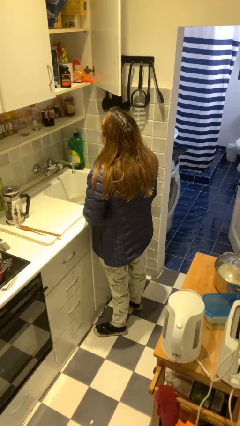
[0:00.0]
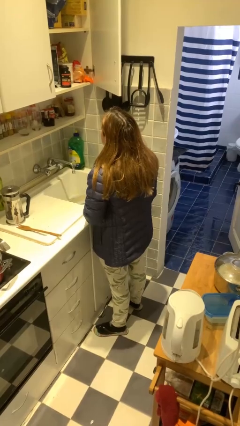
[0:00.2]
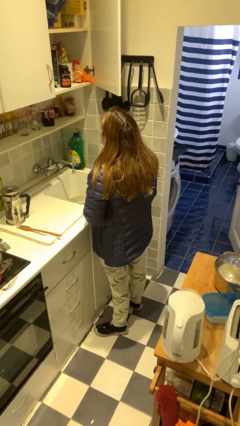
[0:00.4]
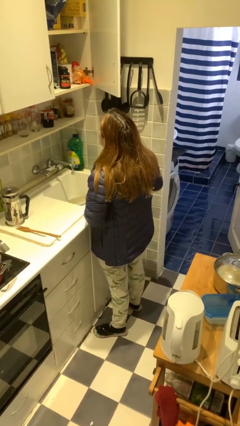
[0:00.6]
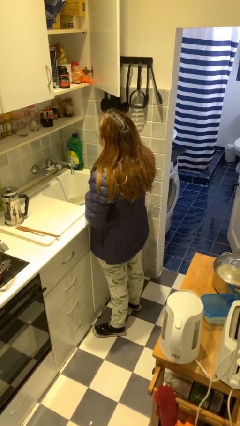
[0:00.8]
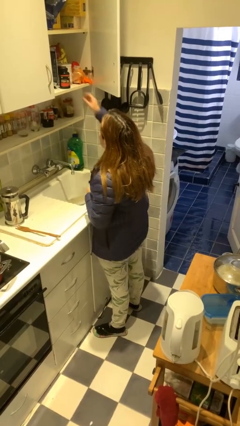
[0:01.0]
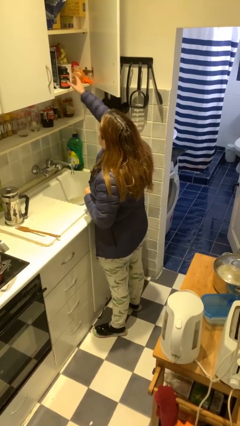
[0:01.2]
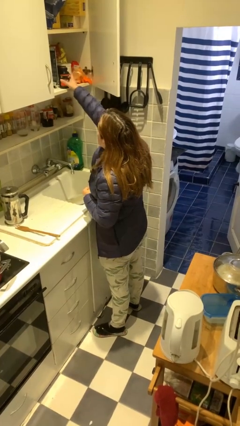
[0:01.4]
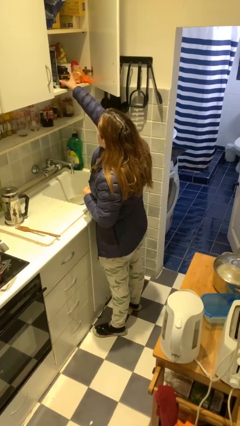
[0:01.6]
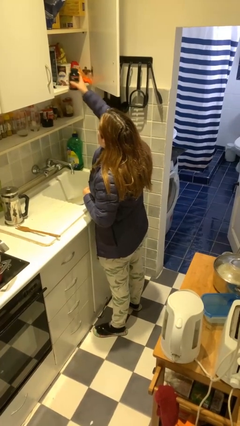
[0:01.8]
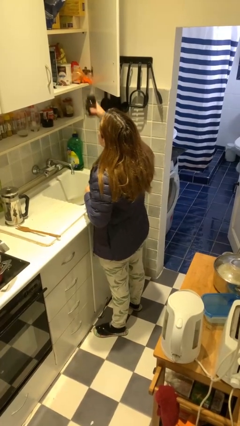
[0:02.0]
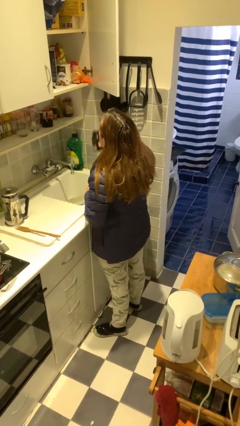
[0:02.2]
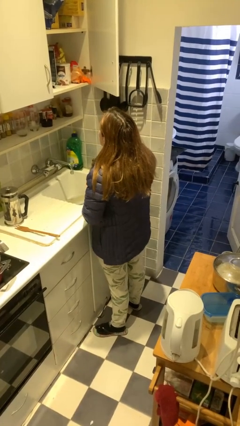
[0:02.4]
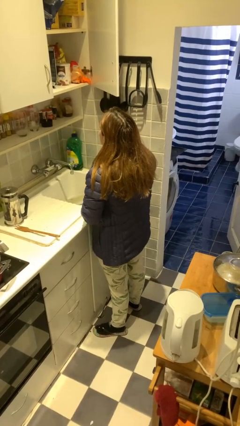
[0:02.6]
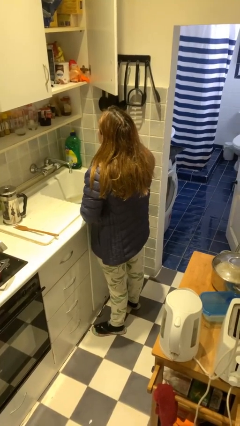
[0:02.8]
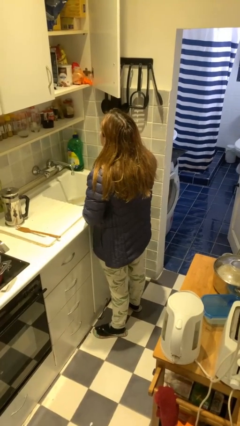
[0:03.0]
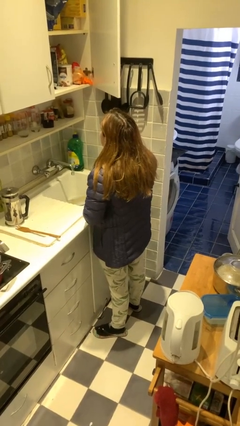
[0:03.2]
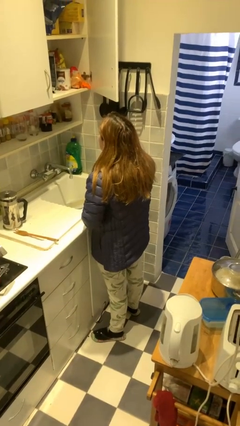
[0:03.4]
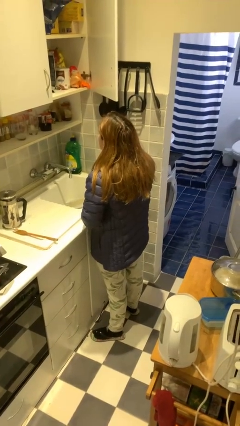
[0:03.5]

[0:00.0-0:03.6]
person takes object from cabinet

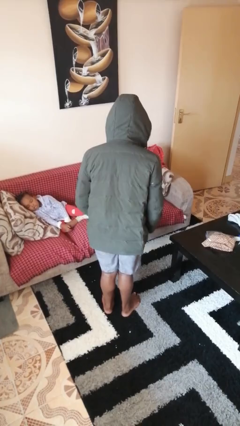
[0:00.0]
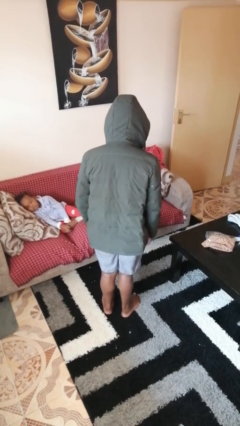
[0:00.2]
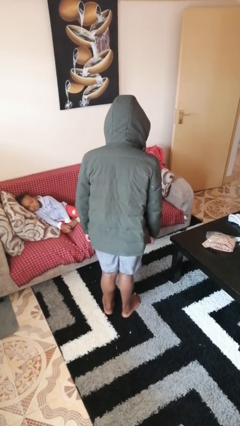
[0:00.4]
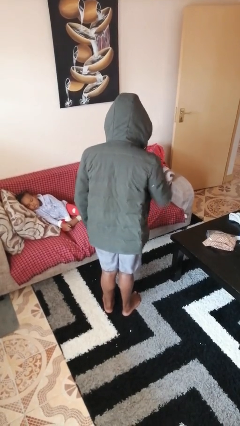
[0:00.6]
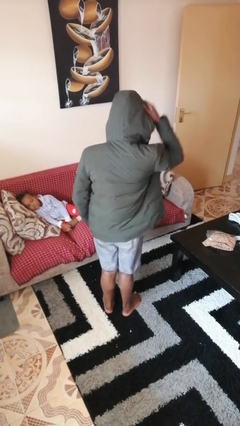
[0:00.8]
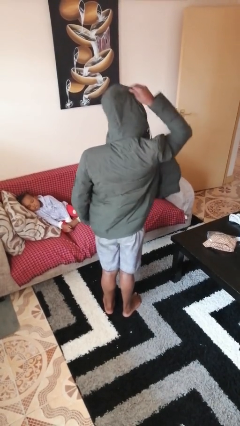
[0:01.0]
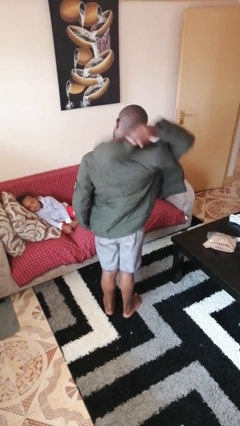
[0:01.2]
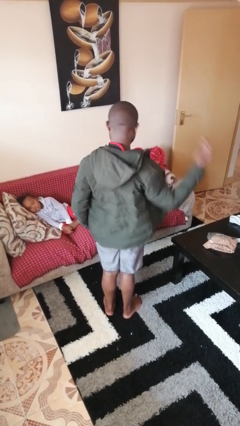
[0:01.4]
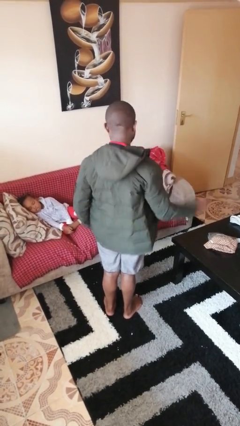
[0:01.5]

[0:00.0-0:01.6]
person takes off hoodie

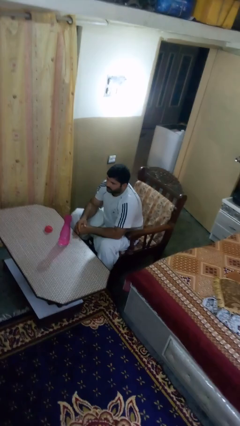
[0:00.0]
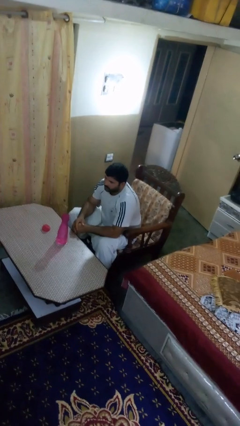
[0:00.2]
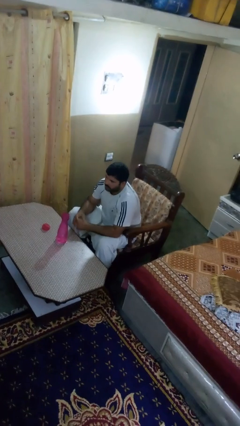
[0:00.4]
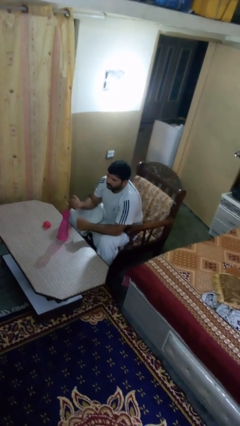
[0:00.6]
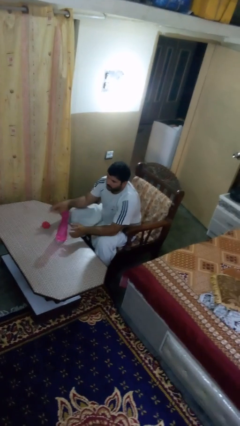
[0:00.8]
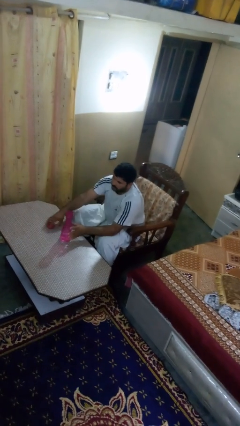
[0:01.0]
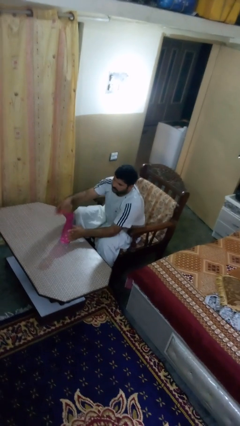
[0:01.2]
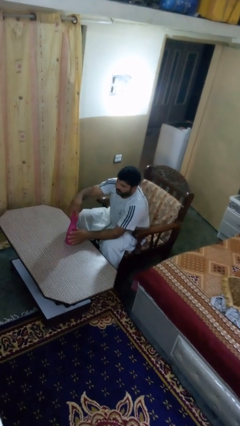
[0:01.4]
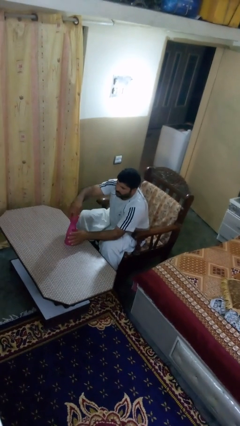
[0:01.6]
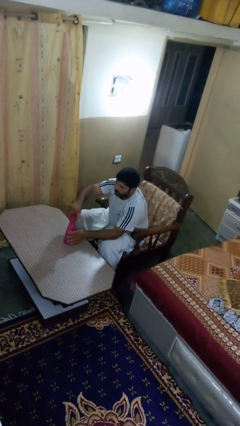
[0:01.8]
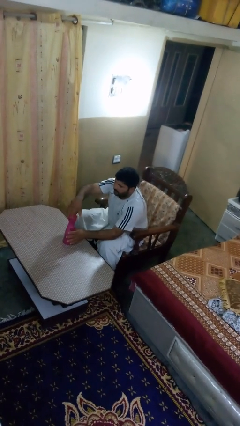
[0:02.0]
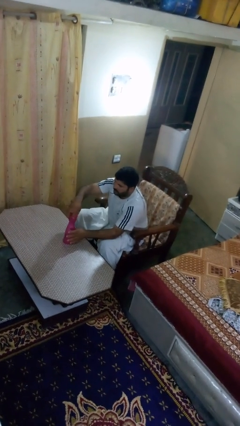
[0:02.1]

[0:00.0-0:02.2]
person screws lid to bottle

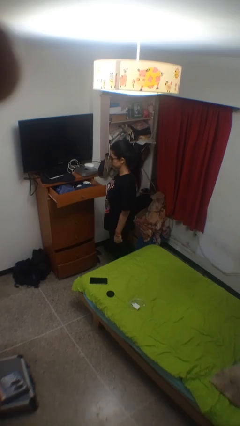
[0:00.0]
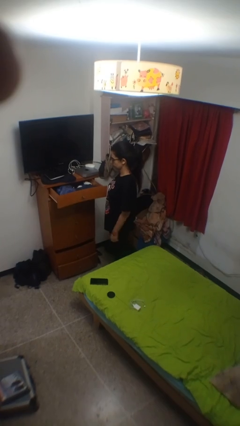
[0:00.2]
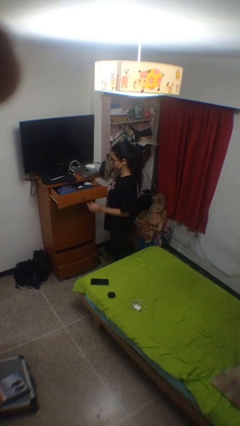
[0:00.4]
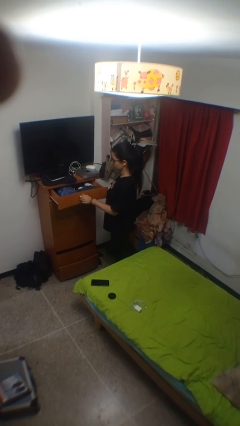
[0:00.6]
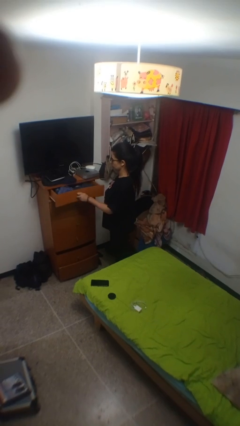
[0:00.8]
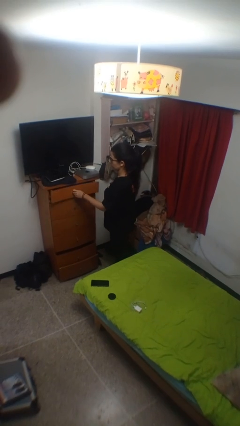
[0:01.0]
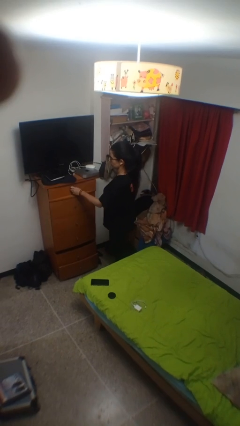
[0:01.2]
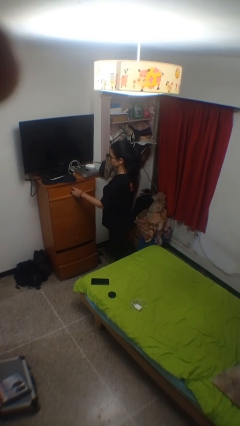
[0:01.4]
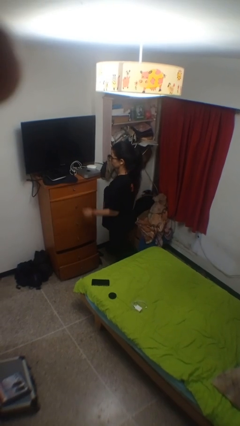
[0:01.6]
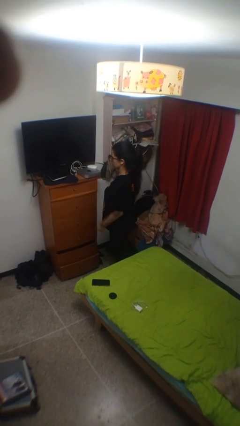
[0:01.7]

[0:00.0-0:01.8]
person closes dresser drawer

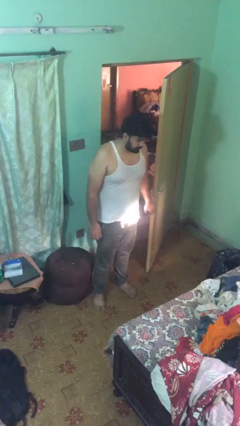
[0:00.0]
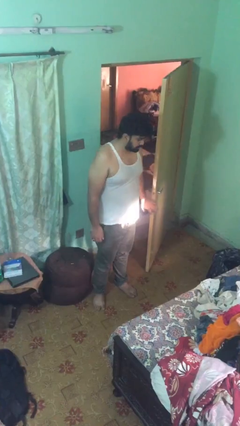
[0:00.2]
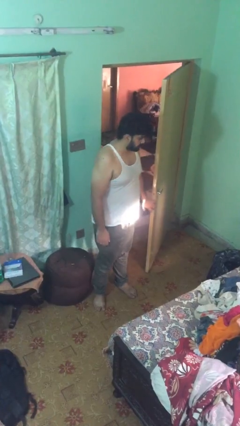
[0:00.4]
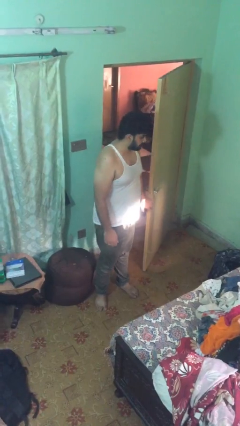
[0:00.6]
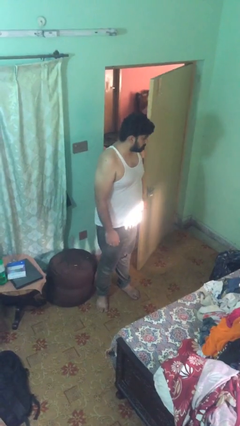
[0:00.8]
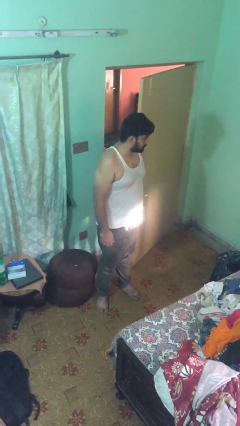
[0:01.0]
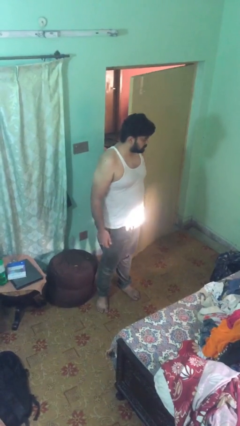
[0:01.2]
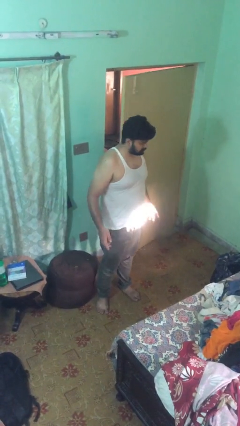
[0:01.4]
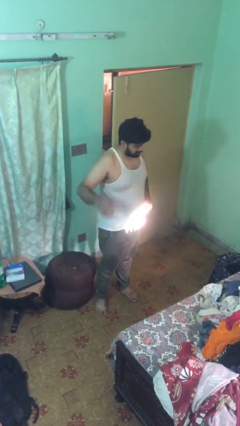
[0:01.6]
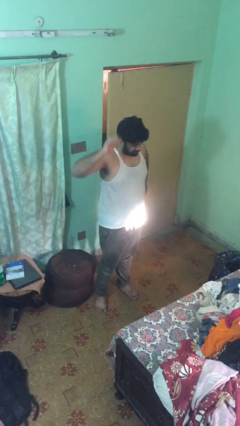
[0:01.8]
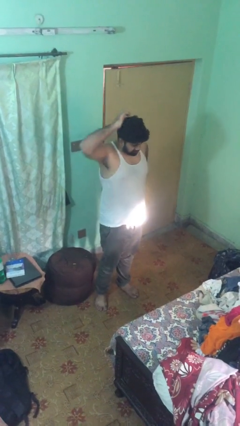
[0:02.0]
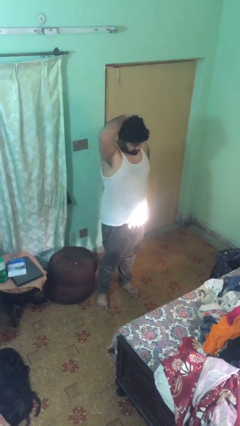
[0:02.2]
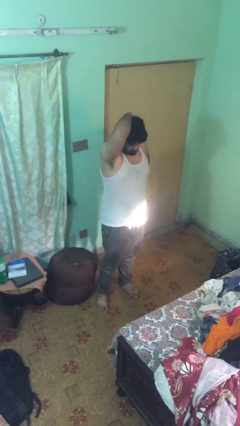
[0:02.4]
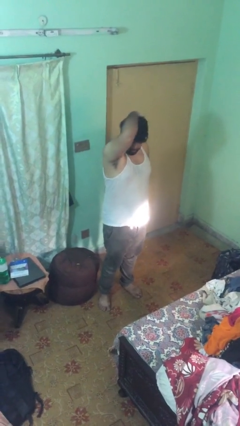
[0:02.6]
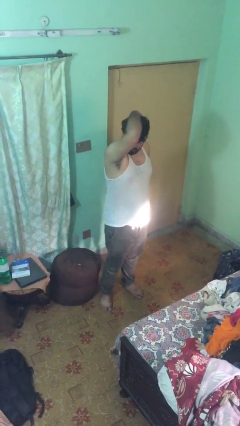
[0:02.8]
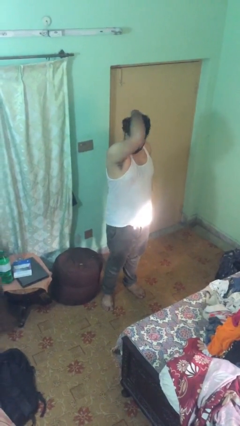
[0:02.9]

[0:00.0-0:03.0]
person closes facility door

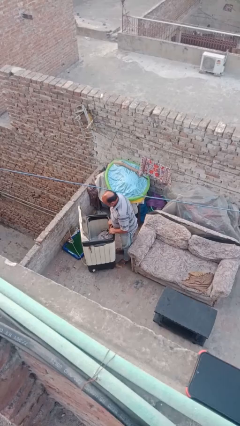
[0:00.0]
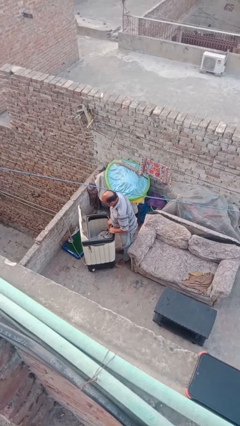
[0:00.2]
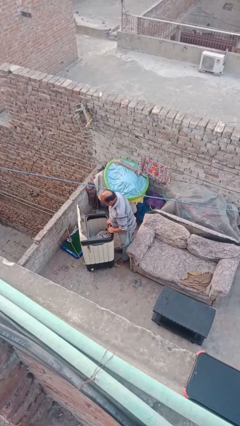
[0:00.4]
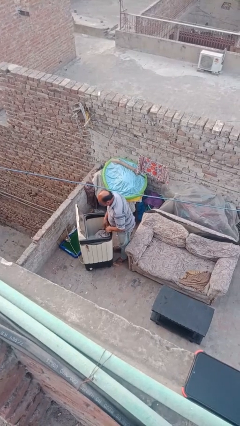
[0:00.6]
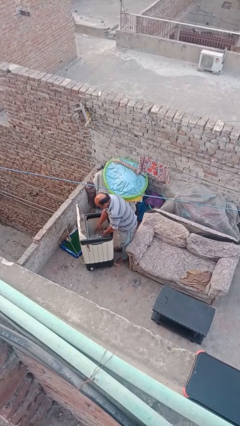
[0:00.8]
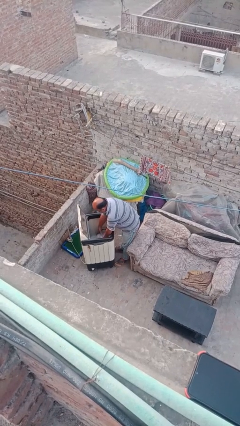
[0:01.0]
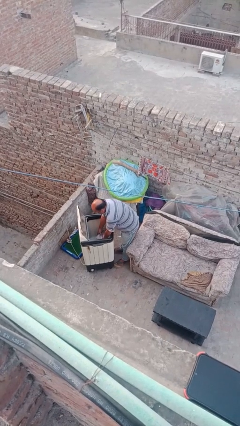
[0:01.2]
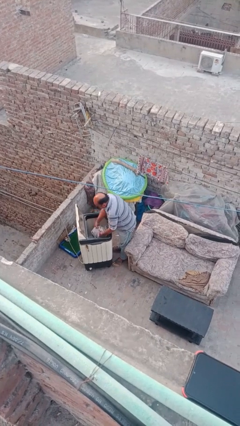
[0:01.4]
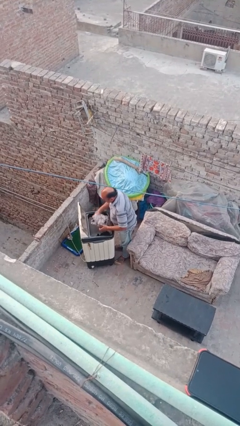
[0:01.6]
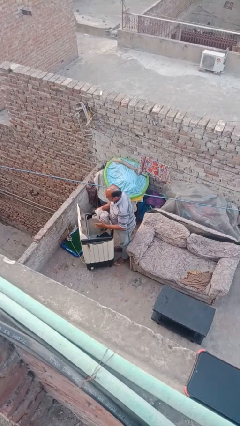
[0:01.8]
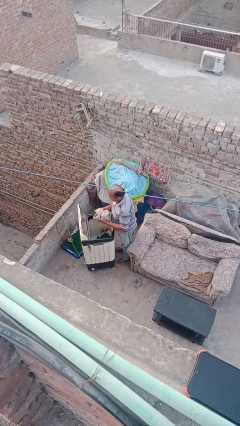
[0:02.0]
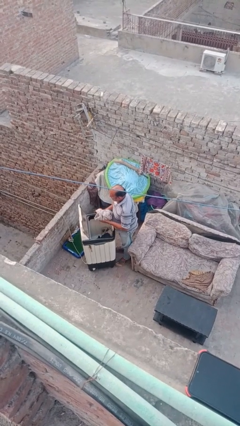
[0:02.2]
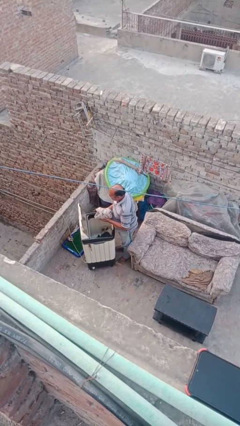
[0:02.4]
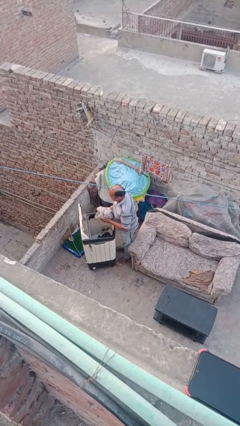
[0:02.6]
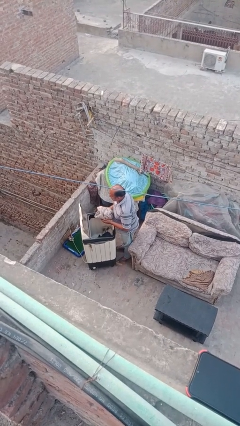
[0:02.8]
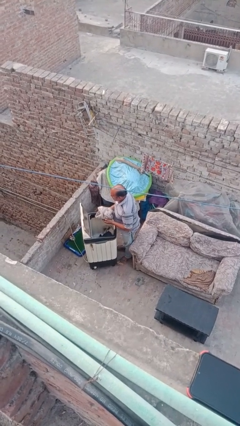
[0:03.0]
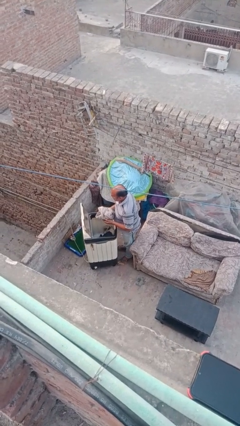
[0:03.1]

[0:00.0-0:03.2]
person unloads clotheswasher

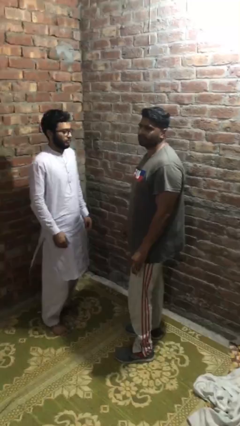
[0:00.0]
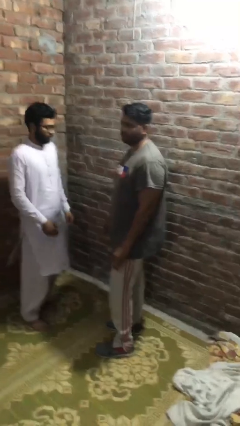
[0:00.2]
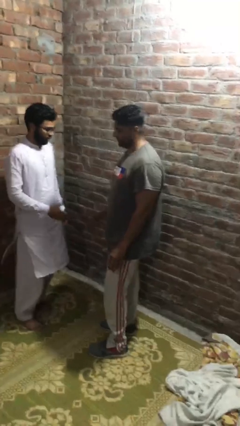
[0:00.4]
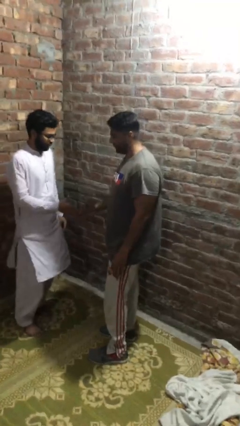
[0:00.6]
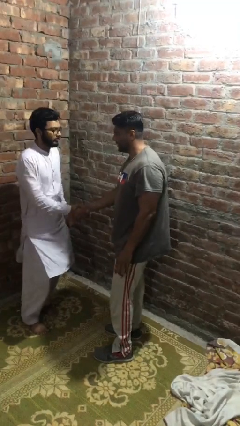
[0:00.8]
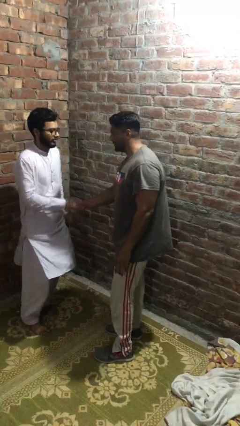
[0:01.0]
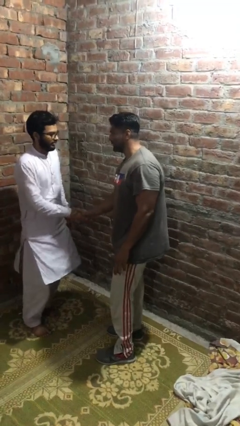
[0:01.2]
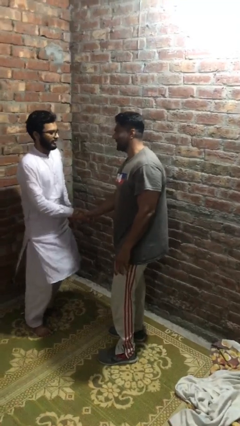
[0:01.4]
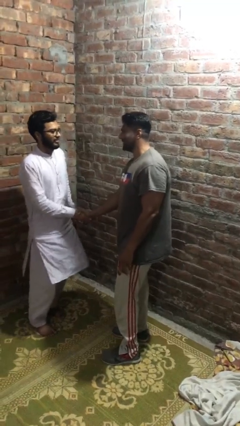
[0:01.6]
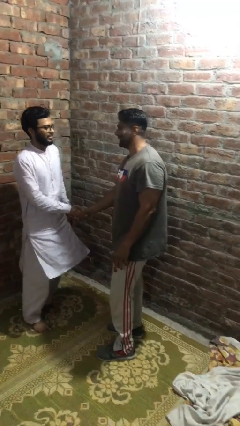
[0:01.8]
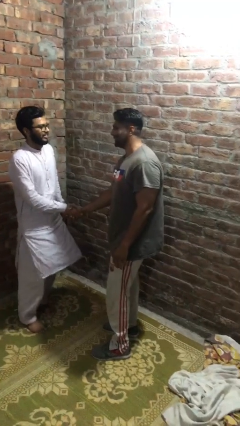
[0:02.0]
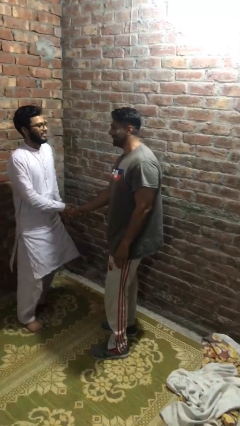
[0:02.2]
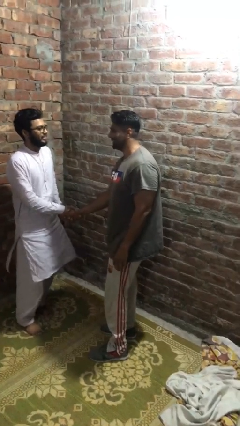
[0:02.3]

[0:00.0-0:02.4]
person shakes hand
